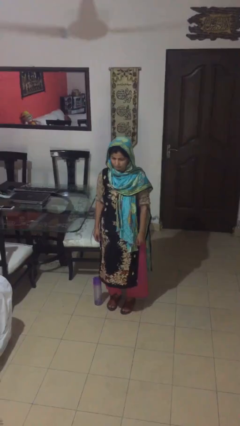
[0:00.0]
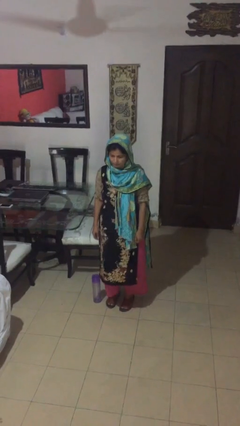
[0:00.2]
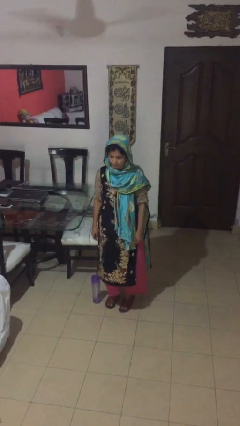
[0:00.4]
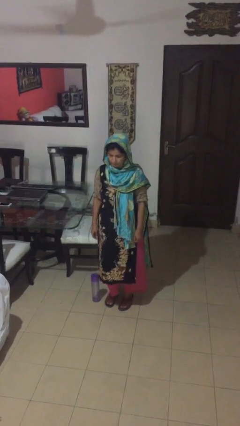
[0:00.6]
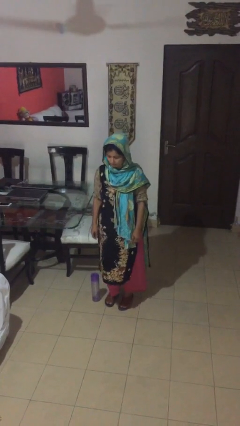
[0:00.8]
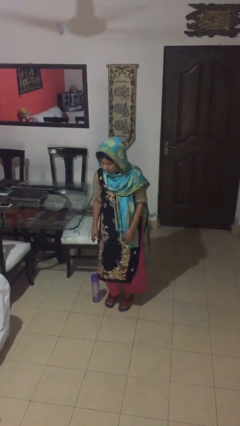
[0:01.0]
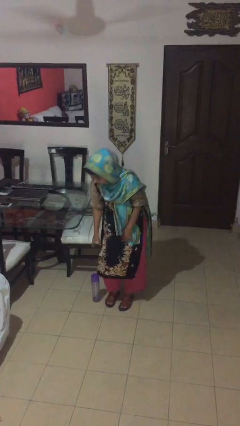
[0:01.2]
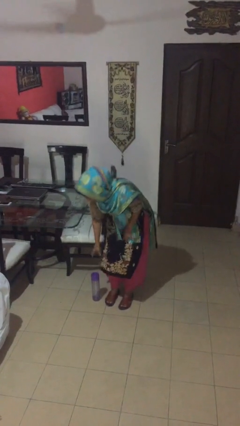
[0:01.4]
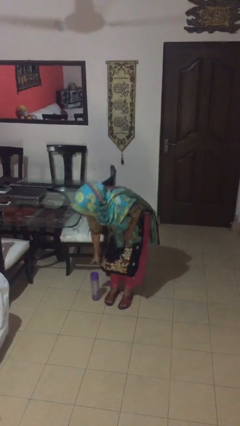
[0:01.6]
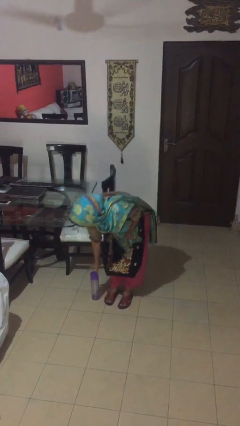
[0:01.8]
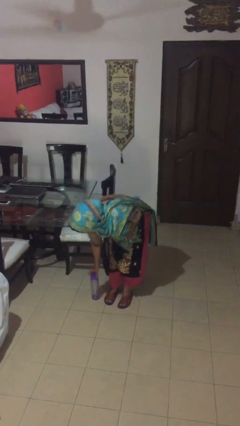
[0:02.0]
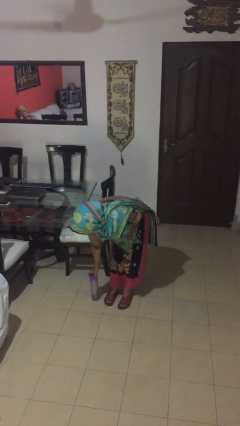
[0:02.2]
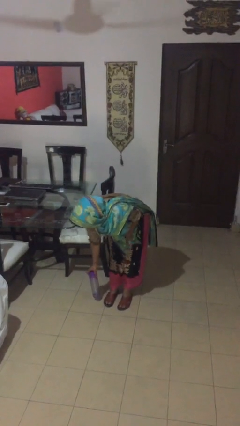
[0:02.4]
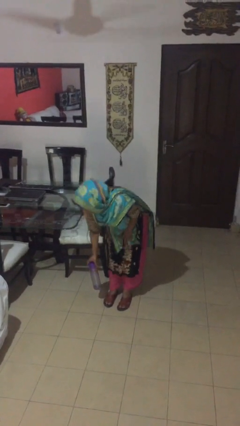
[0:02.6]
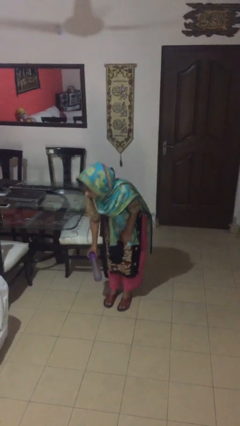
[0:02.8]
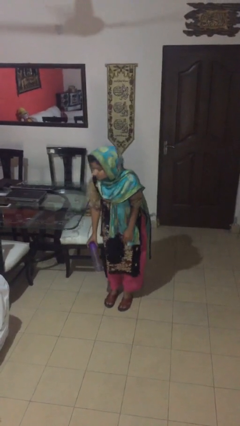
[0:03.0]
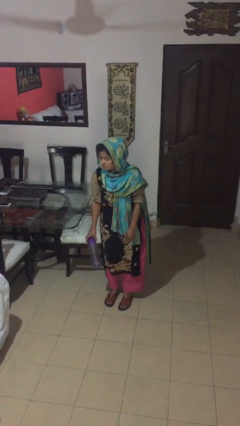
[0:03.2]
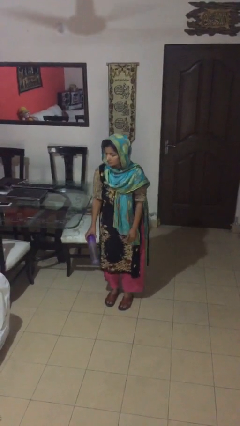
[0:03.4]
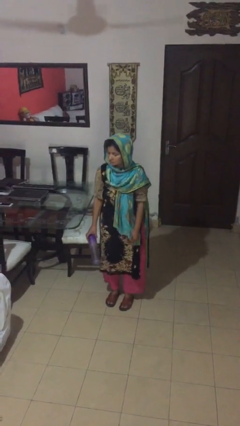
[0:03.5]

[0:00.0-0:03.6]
person picks up object from floor

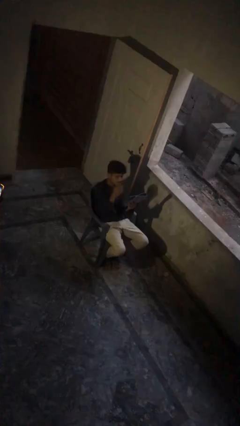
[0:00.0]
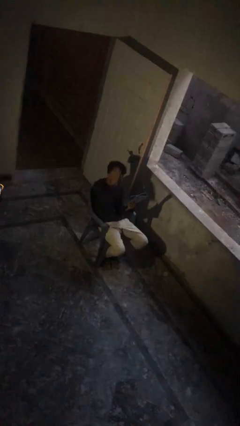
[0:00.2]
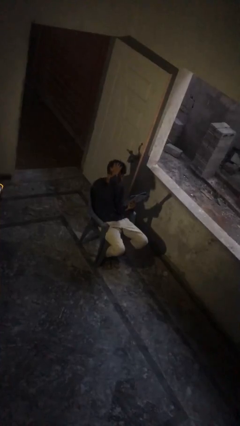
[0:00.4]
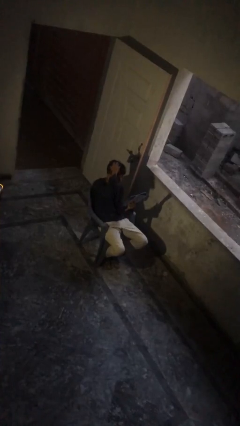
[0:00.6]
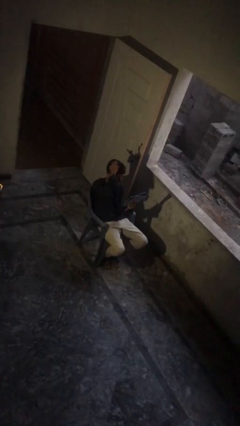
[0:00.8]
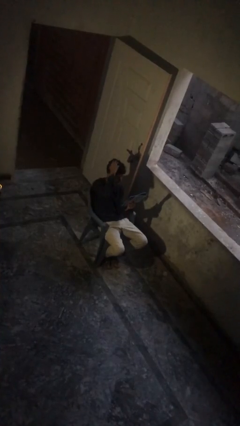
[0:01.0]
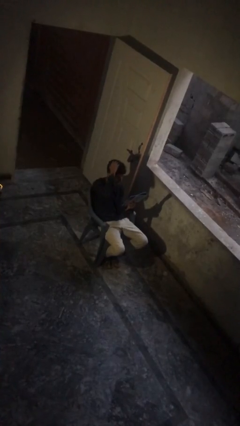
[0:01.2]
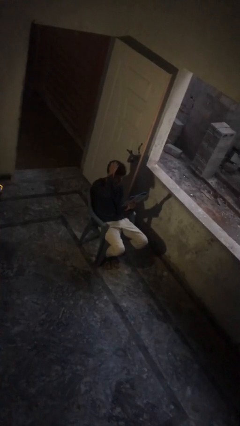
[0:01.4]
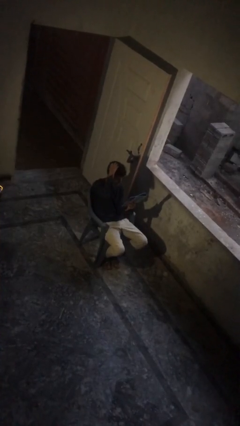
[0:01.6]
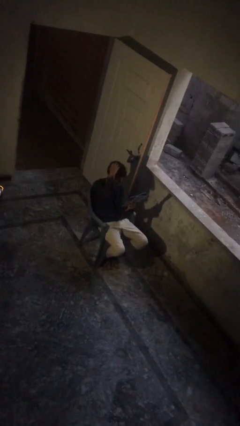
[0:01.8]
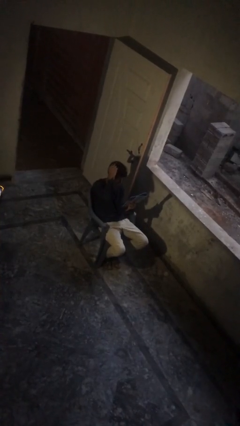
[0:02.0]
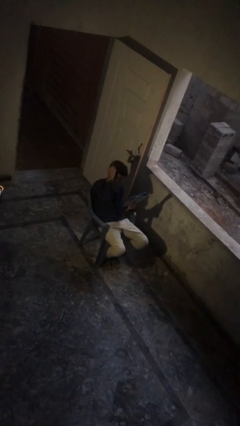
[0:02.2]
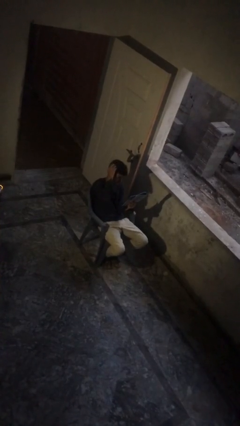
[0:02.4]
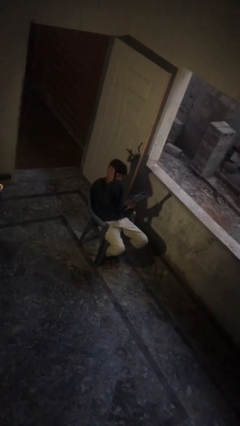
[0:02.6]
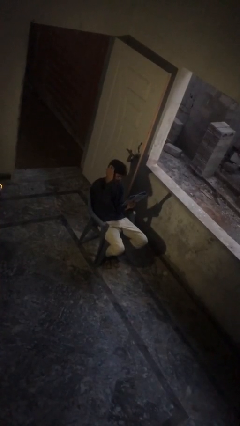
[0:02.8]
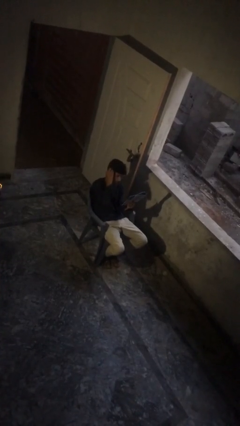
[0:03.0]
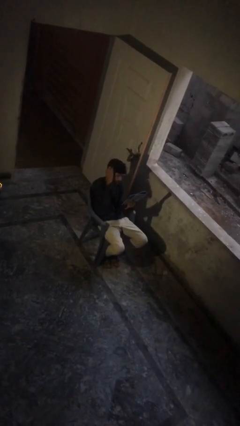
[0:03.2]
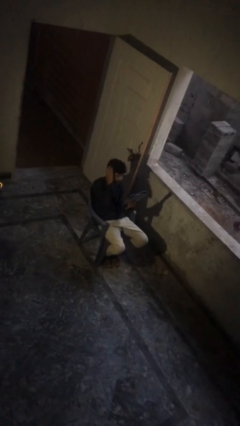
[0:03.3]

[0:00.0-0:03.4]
person reads document

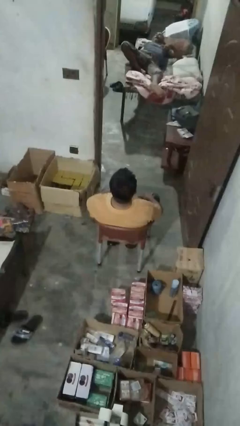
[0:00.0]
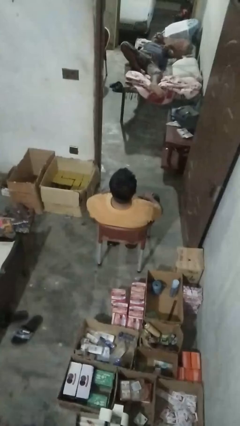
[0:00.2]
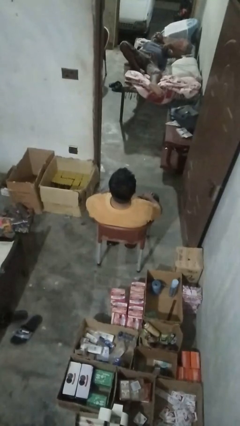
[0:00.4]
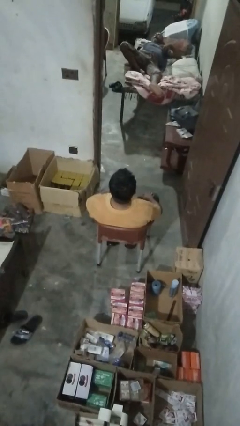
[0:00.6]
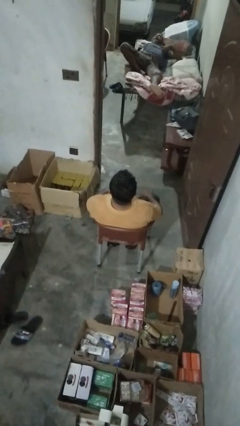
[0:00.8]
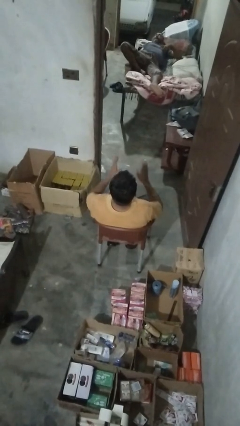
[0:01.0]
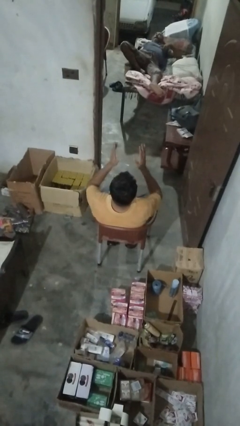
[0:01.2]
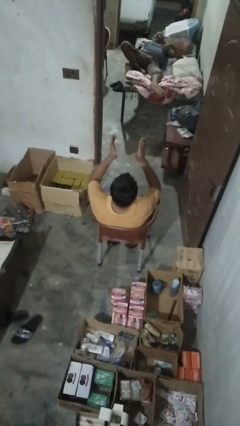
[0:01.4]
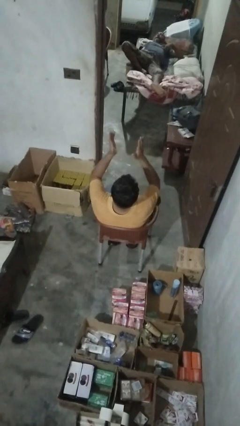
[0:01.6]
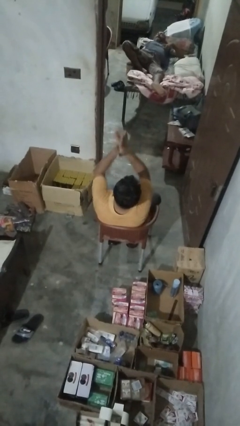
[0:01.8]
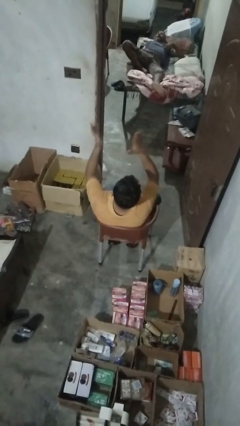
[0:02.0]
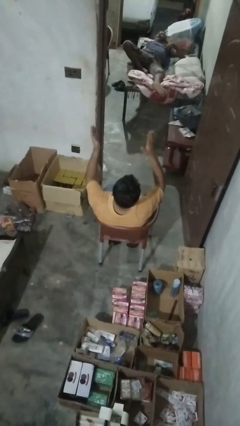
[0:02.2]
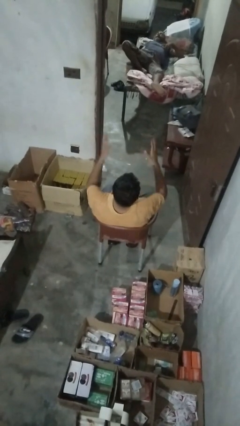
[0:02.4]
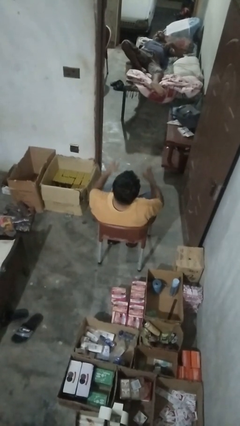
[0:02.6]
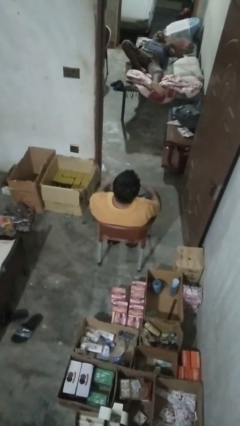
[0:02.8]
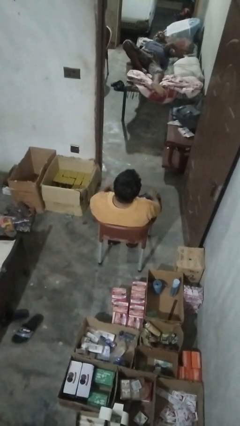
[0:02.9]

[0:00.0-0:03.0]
person swats bug

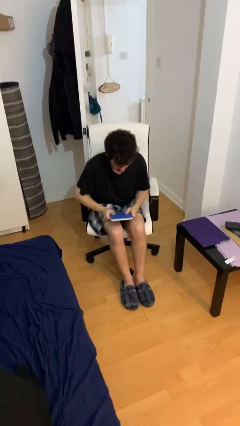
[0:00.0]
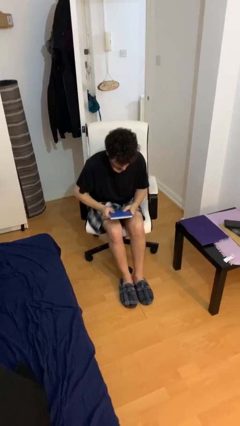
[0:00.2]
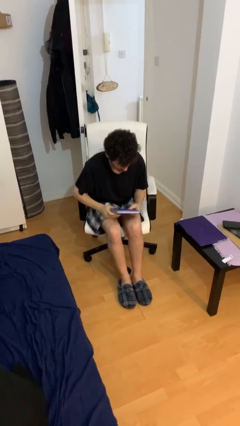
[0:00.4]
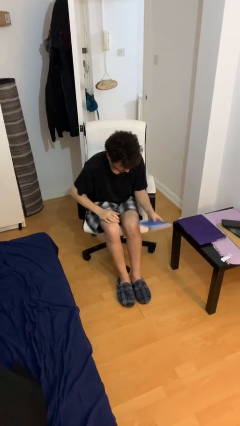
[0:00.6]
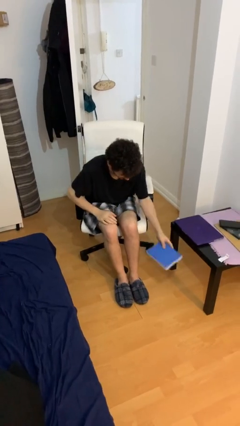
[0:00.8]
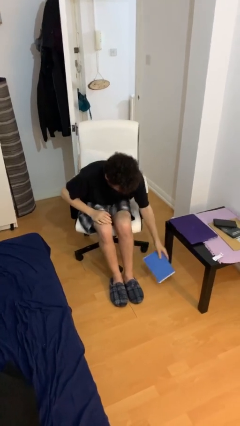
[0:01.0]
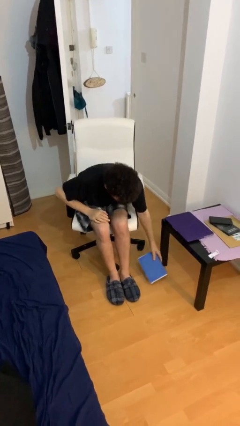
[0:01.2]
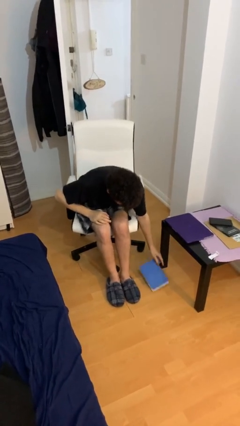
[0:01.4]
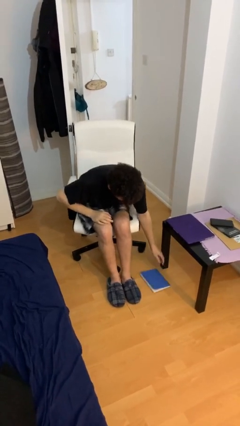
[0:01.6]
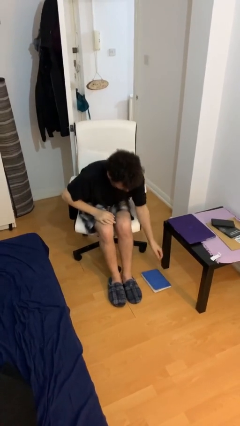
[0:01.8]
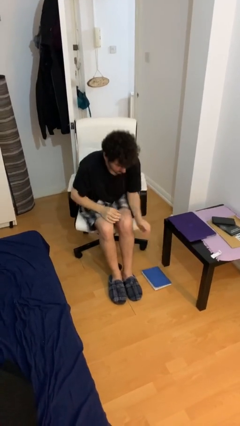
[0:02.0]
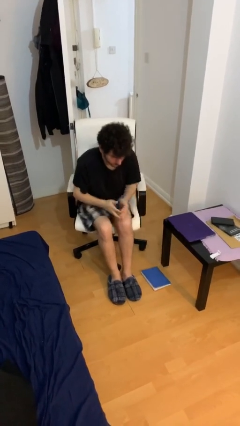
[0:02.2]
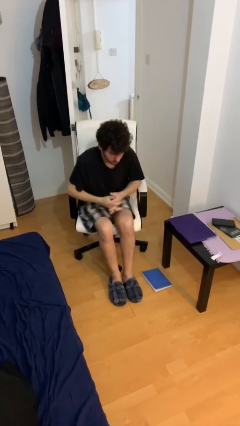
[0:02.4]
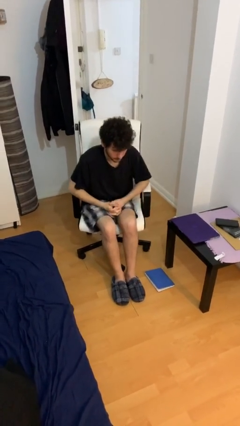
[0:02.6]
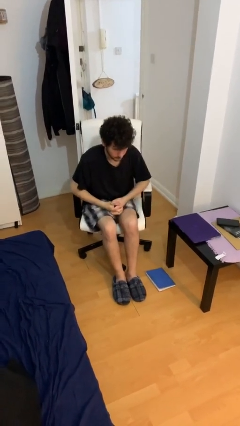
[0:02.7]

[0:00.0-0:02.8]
person puts down object on floor

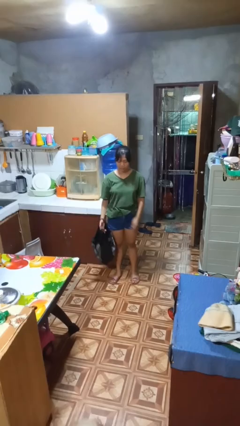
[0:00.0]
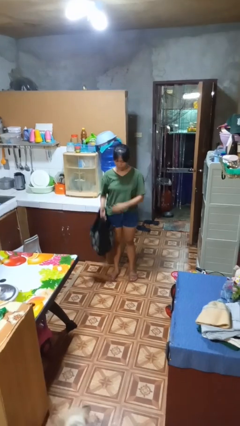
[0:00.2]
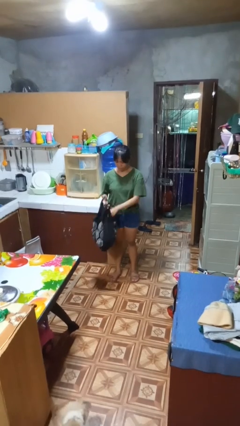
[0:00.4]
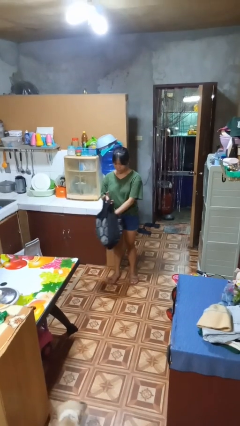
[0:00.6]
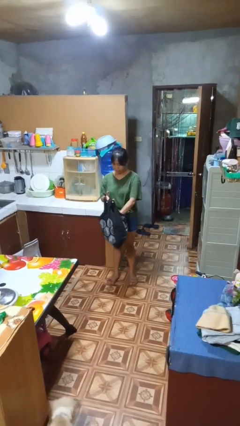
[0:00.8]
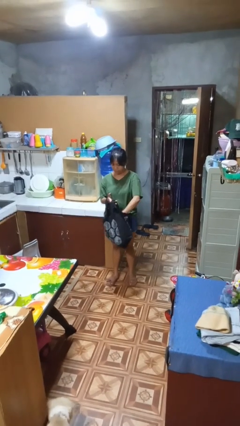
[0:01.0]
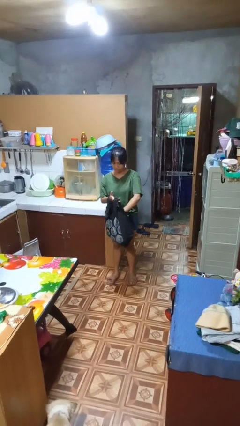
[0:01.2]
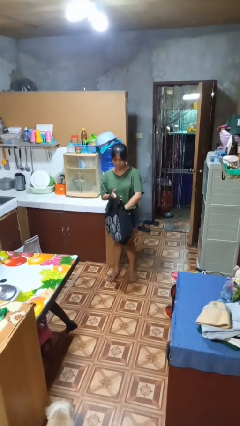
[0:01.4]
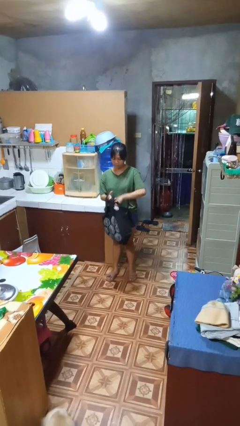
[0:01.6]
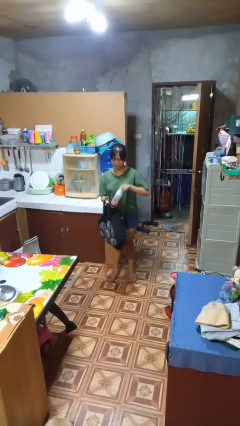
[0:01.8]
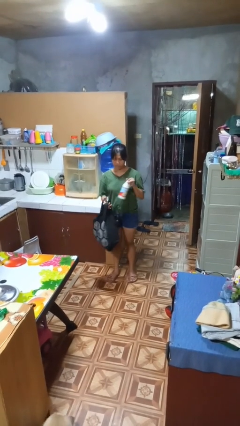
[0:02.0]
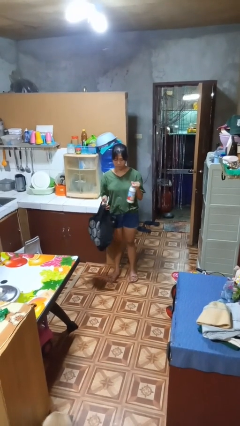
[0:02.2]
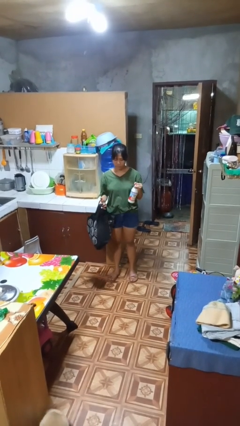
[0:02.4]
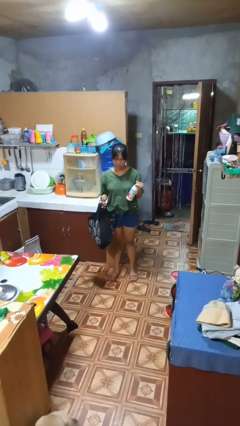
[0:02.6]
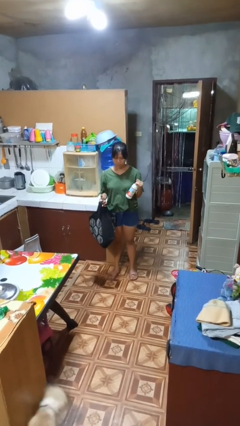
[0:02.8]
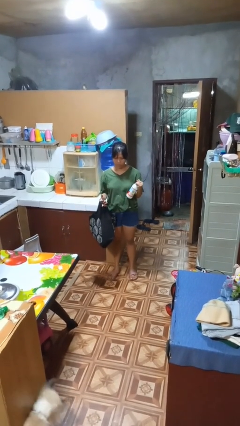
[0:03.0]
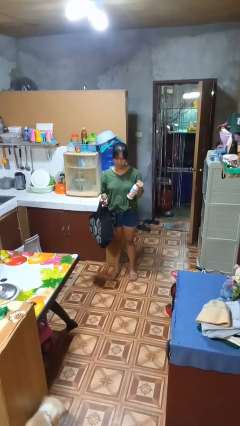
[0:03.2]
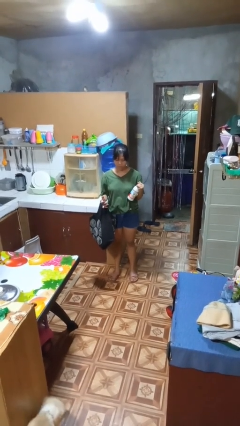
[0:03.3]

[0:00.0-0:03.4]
person takes object from bag

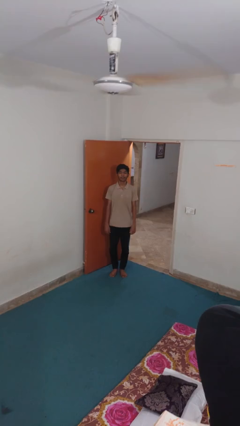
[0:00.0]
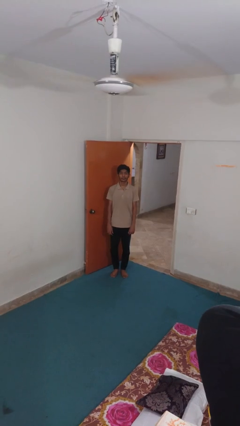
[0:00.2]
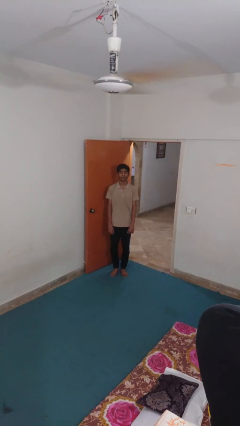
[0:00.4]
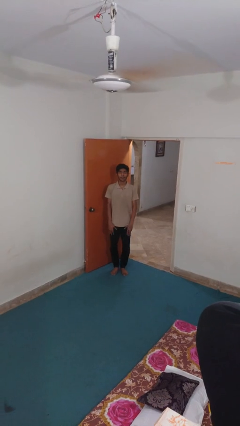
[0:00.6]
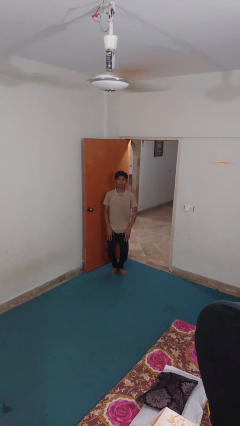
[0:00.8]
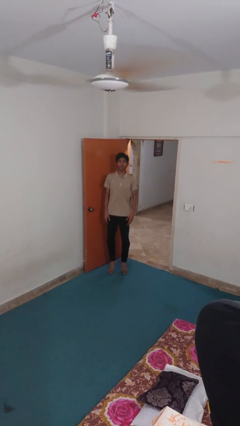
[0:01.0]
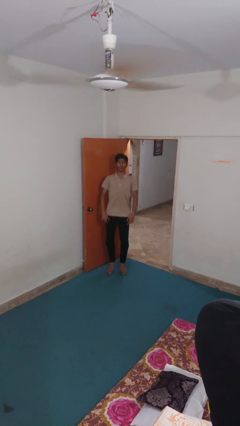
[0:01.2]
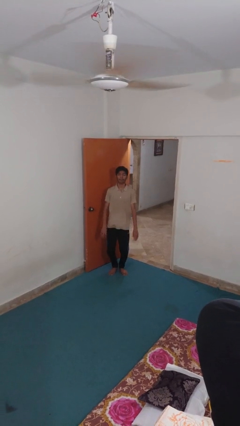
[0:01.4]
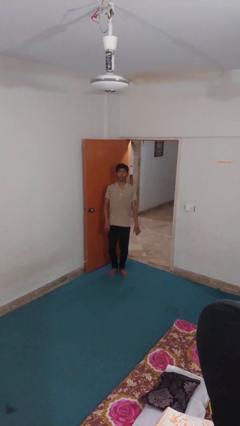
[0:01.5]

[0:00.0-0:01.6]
person jumps
